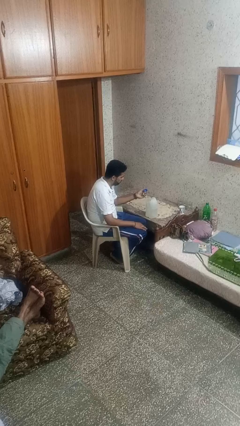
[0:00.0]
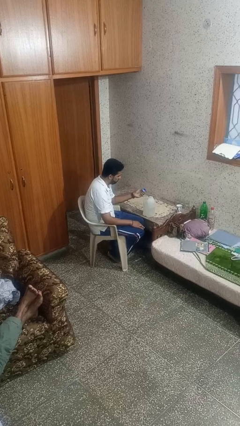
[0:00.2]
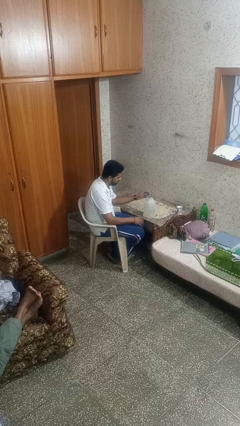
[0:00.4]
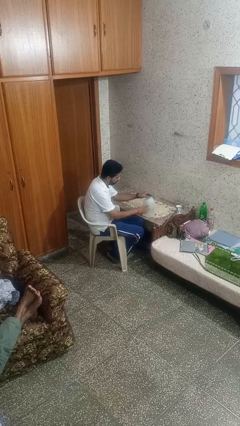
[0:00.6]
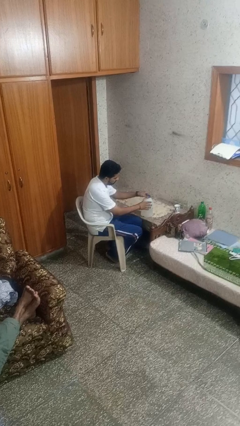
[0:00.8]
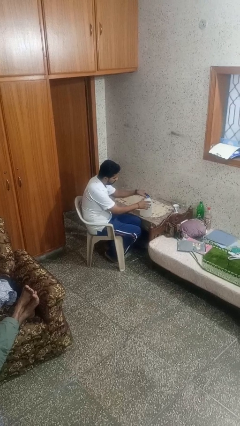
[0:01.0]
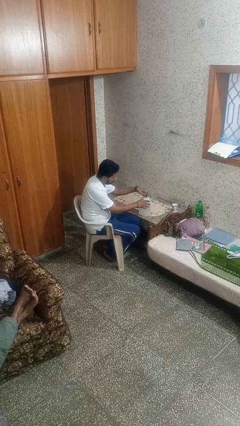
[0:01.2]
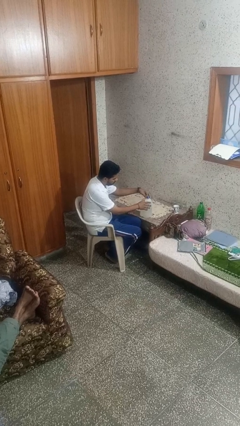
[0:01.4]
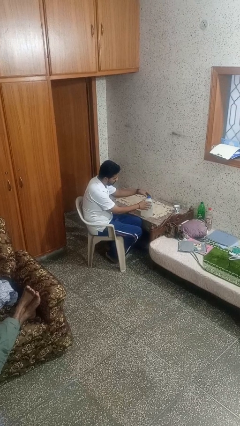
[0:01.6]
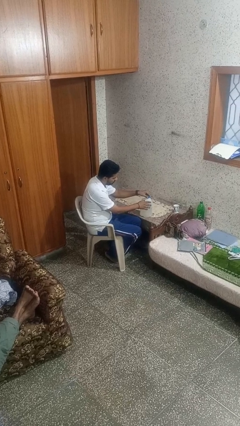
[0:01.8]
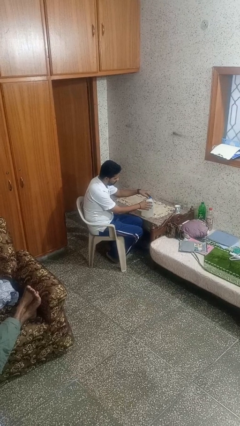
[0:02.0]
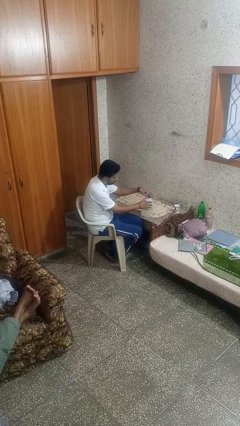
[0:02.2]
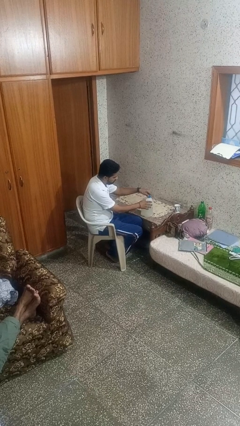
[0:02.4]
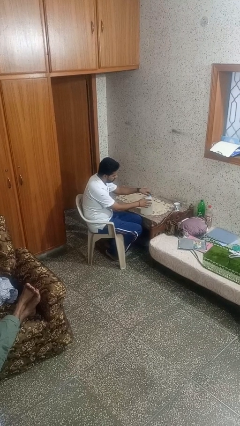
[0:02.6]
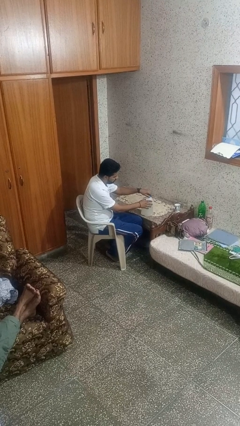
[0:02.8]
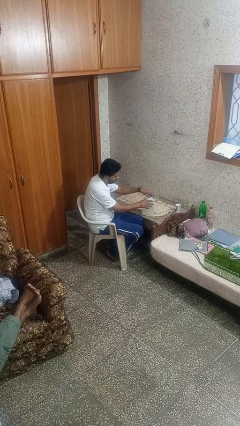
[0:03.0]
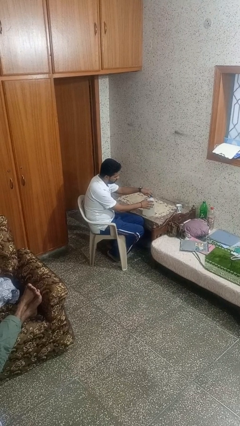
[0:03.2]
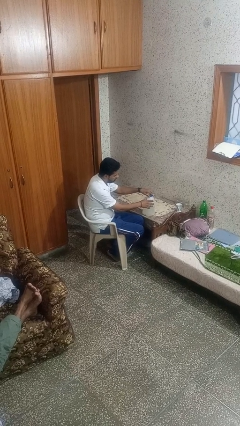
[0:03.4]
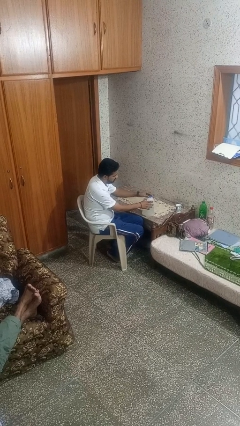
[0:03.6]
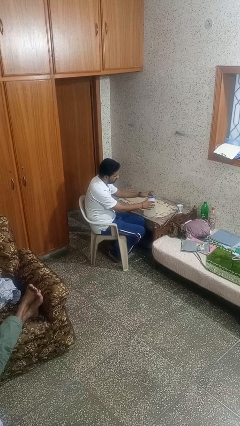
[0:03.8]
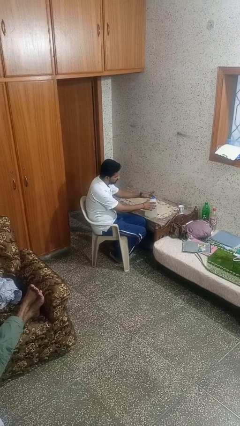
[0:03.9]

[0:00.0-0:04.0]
person screws lid to bottle

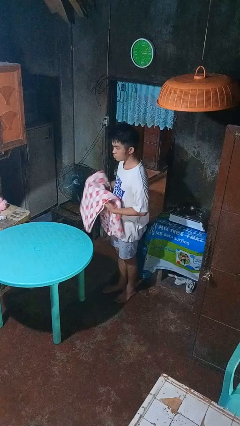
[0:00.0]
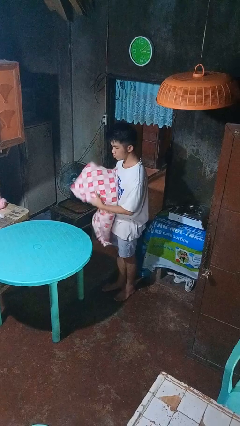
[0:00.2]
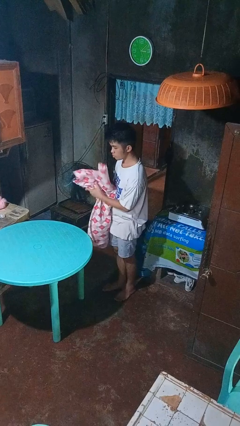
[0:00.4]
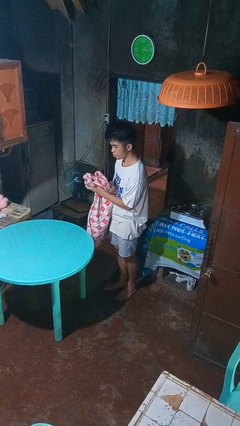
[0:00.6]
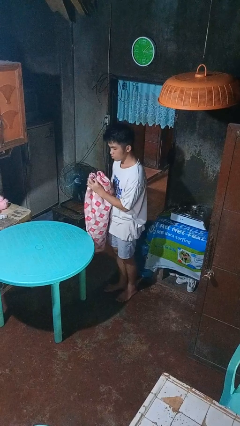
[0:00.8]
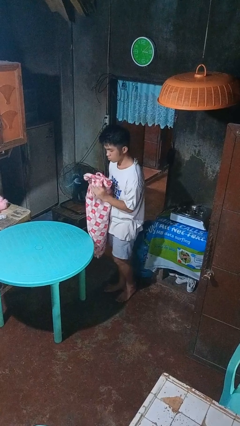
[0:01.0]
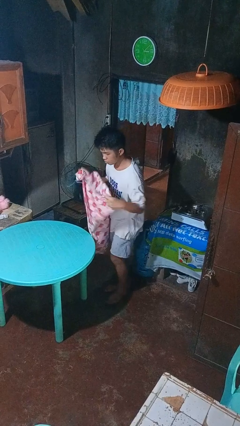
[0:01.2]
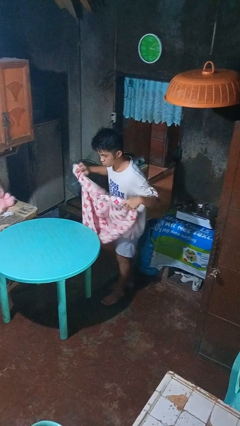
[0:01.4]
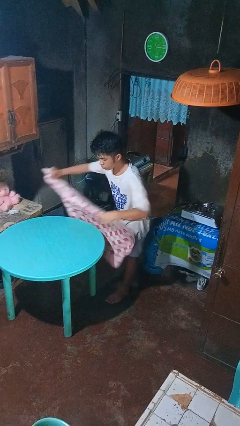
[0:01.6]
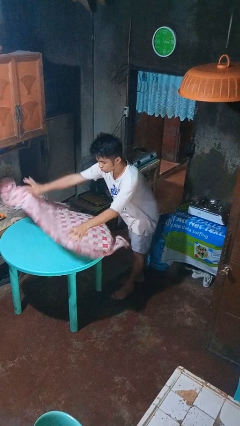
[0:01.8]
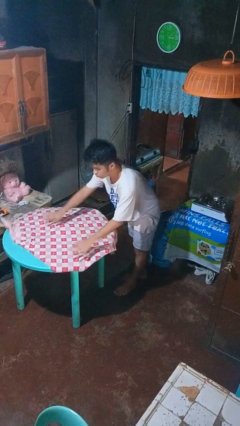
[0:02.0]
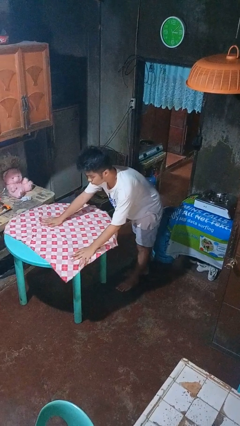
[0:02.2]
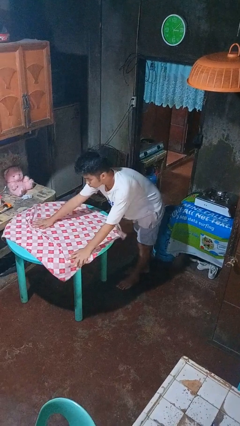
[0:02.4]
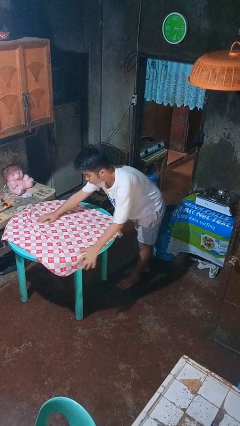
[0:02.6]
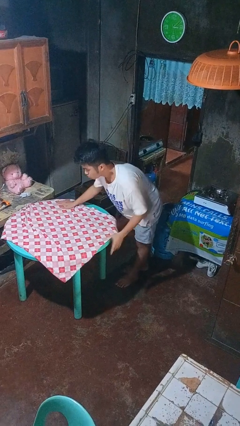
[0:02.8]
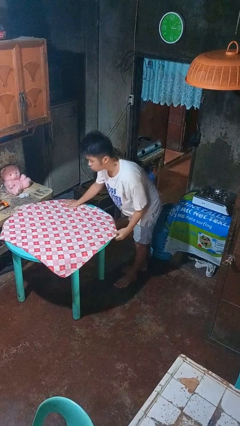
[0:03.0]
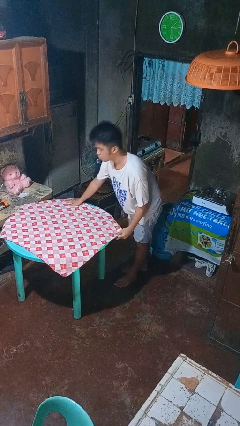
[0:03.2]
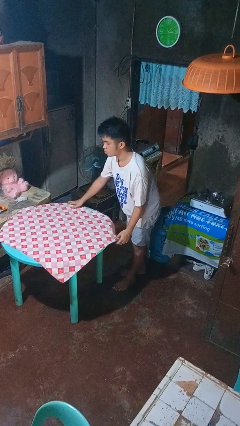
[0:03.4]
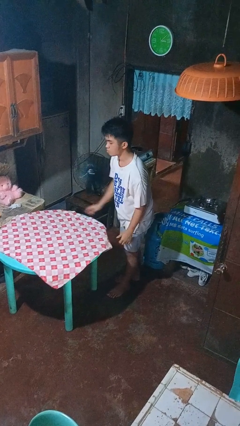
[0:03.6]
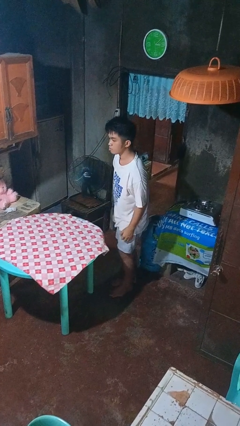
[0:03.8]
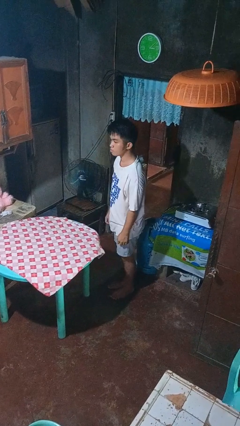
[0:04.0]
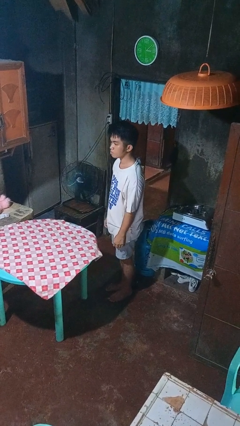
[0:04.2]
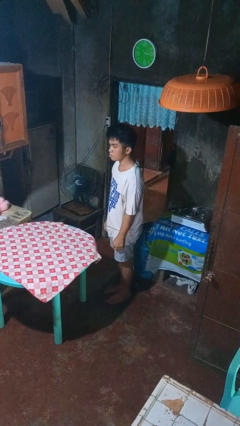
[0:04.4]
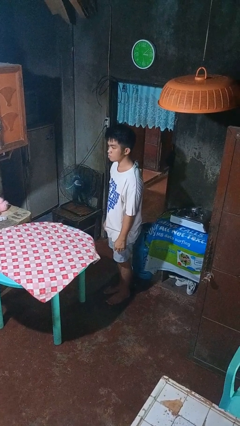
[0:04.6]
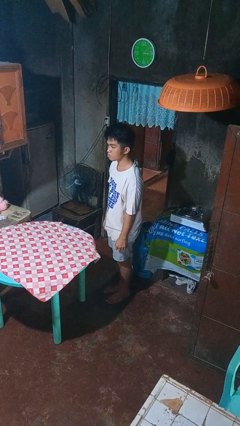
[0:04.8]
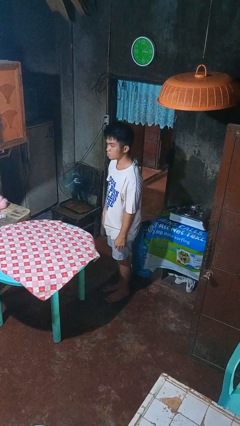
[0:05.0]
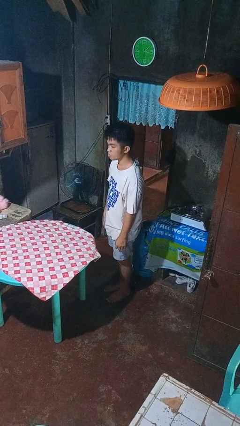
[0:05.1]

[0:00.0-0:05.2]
person spreads tablecloth

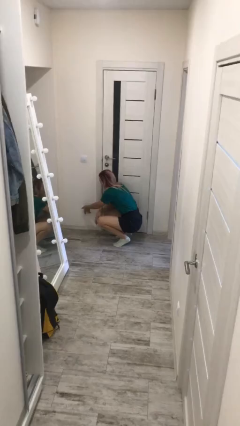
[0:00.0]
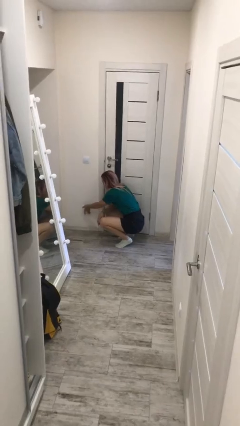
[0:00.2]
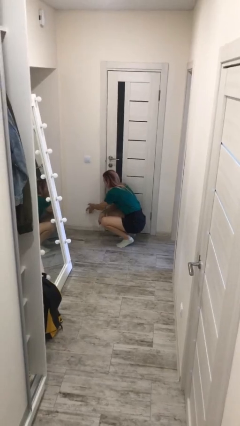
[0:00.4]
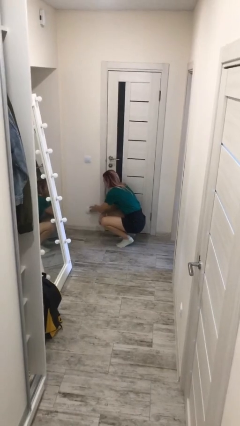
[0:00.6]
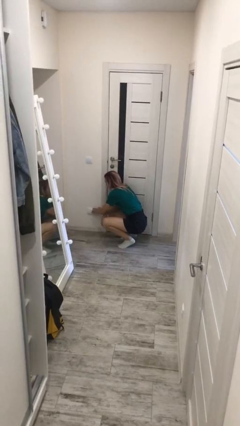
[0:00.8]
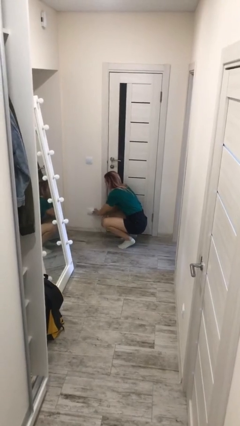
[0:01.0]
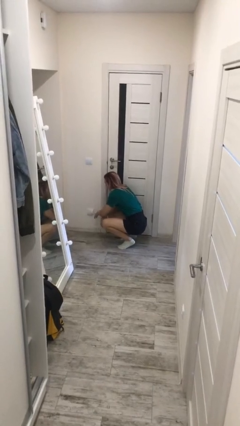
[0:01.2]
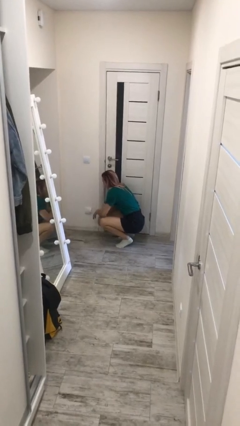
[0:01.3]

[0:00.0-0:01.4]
person adjusts thermostat

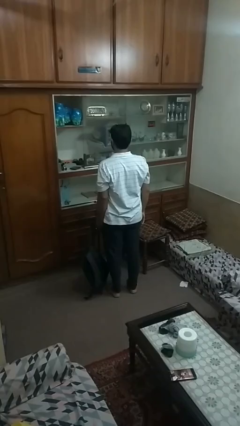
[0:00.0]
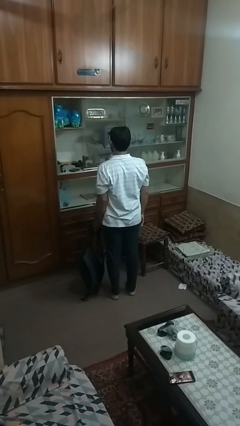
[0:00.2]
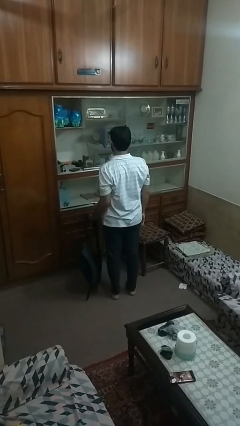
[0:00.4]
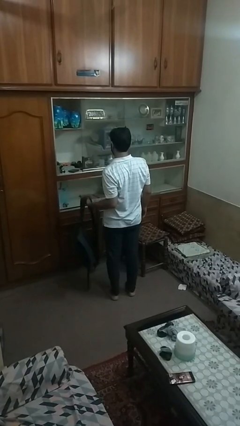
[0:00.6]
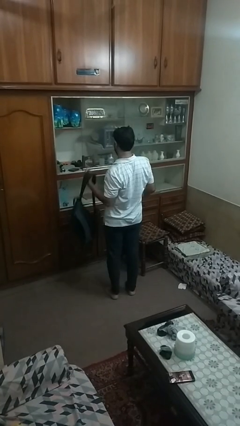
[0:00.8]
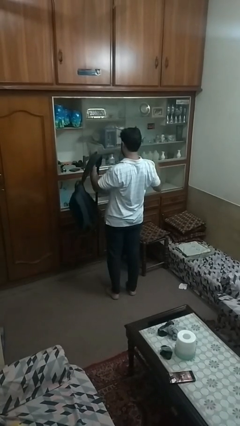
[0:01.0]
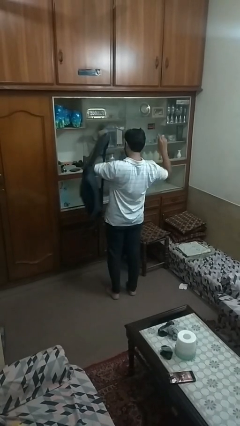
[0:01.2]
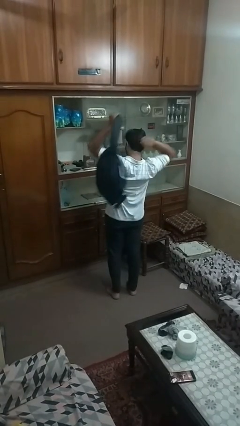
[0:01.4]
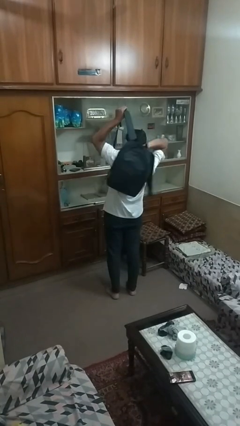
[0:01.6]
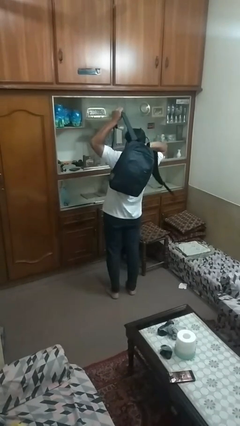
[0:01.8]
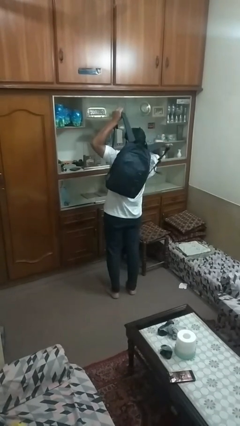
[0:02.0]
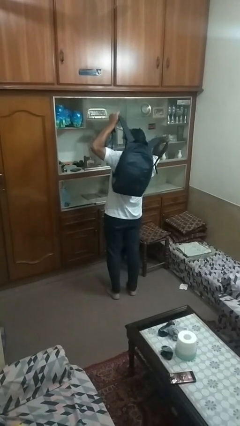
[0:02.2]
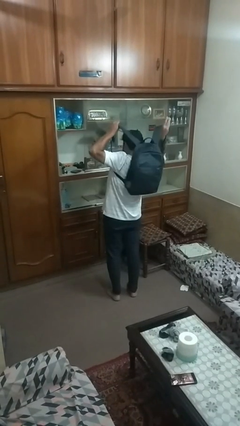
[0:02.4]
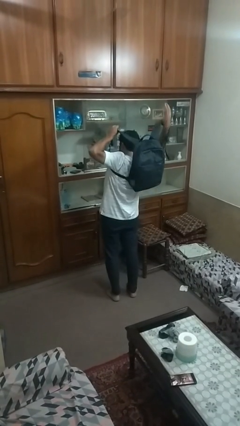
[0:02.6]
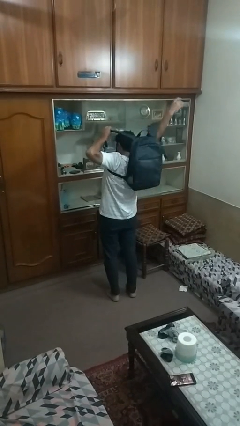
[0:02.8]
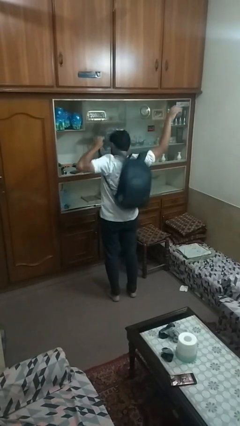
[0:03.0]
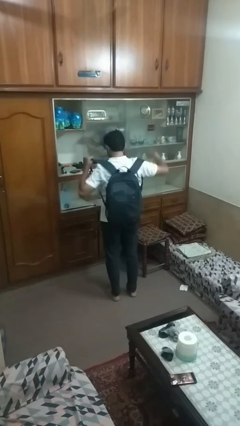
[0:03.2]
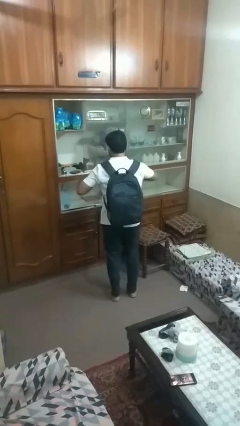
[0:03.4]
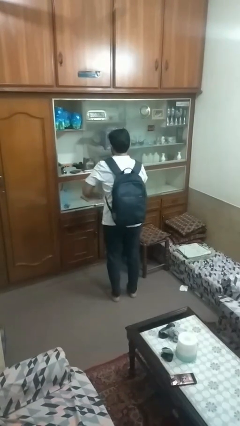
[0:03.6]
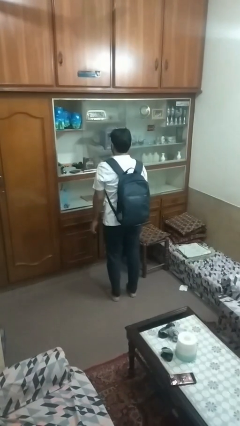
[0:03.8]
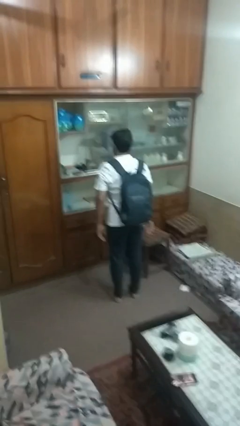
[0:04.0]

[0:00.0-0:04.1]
person puts on backpack

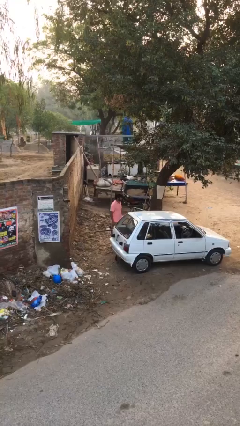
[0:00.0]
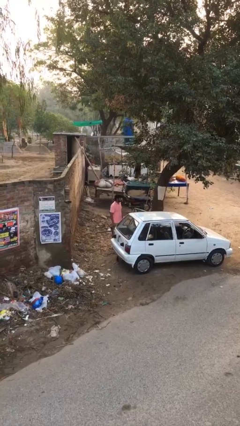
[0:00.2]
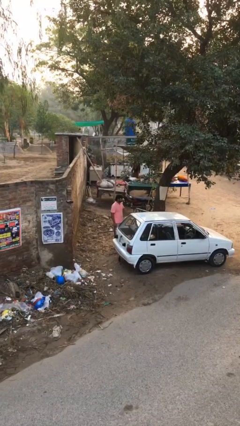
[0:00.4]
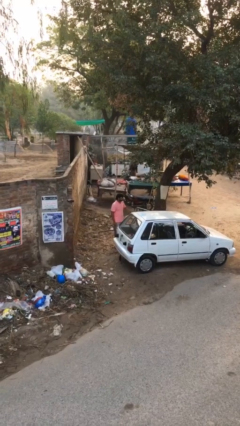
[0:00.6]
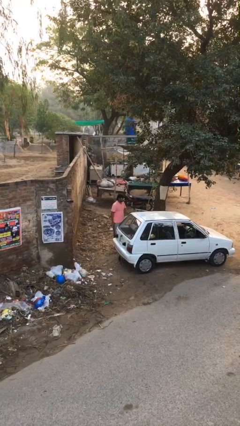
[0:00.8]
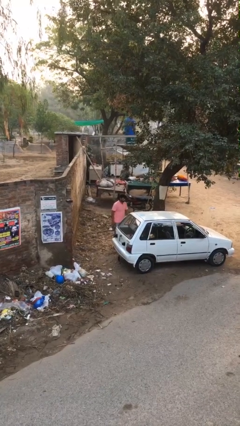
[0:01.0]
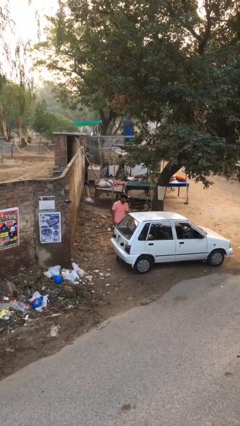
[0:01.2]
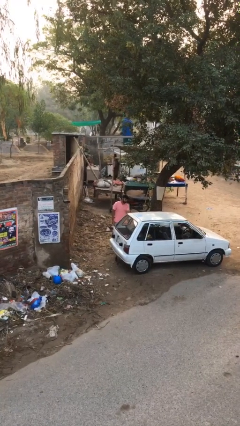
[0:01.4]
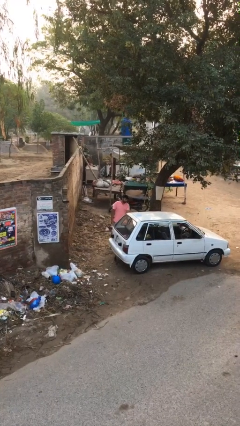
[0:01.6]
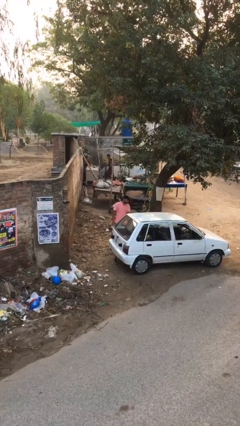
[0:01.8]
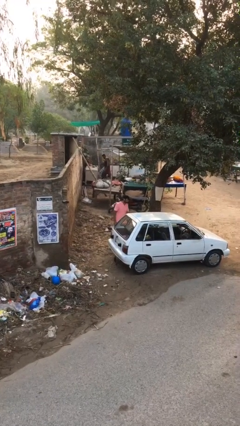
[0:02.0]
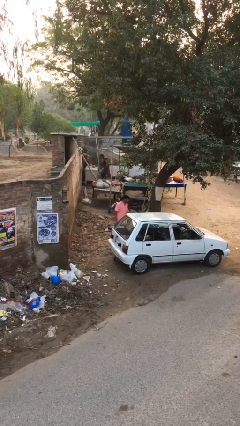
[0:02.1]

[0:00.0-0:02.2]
person closes car door

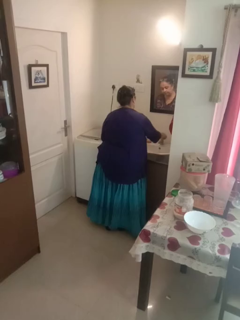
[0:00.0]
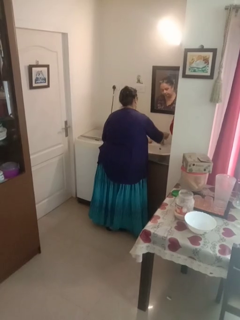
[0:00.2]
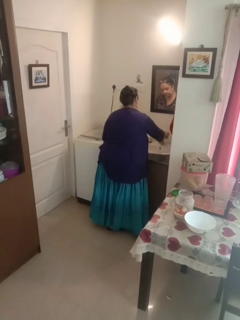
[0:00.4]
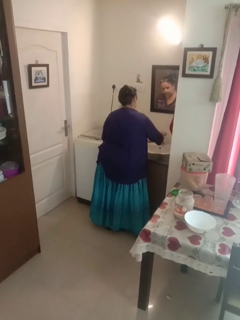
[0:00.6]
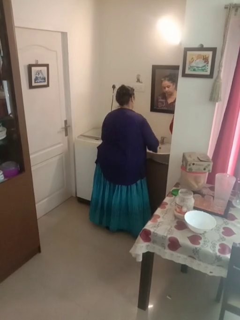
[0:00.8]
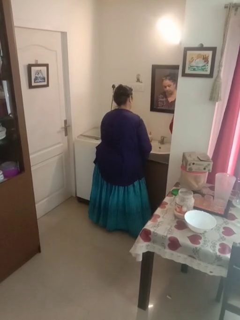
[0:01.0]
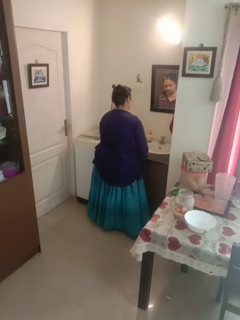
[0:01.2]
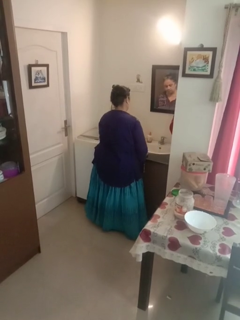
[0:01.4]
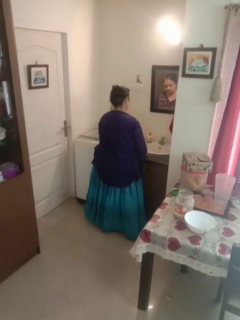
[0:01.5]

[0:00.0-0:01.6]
person turns on faucet
